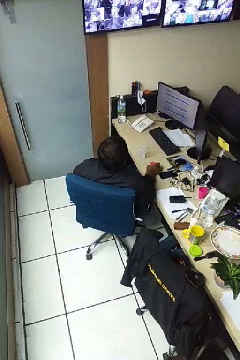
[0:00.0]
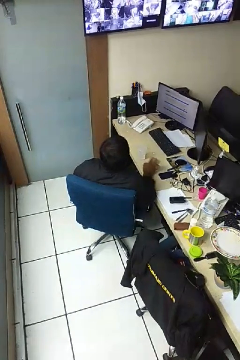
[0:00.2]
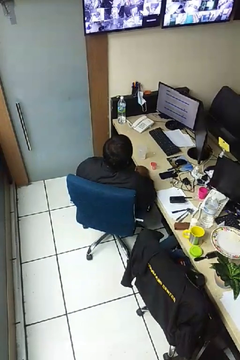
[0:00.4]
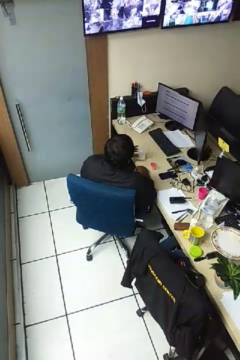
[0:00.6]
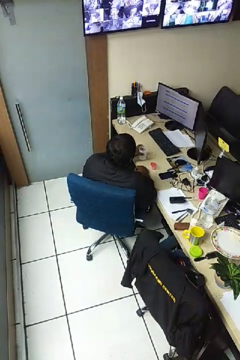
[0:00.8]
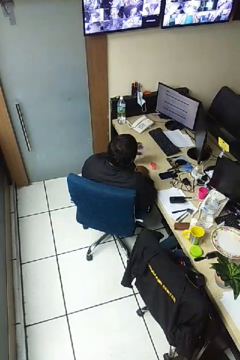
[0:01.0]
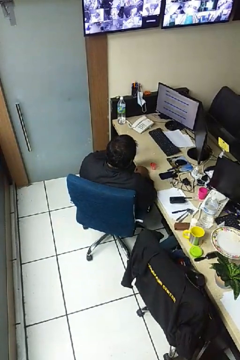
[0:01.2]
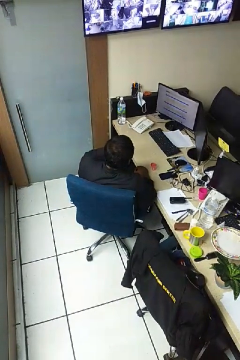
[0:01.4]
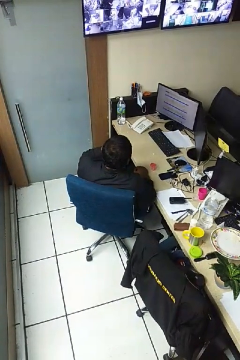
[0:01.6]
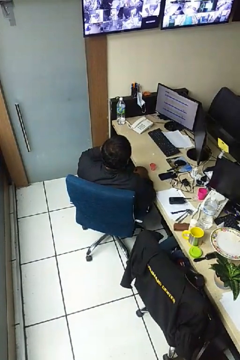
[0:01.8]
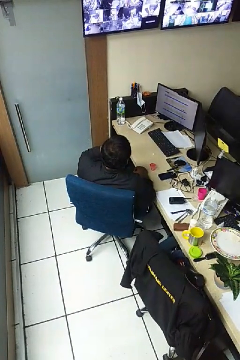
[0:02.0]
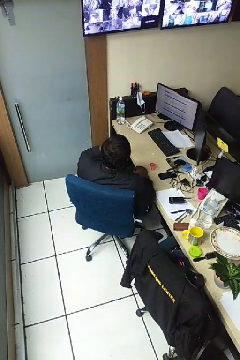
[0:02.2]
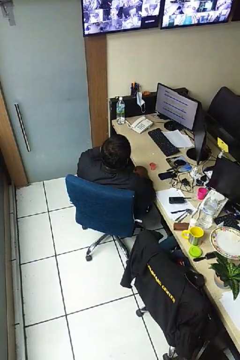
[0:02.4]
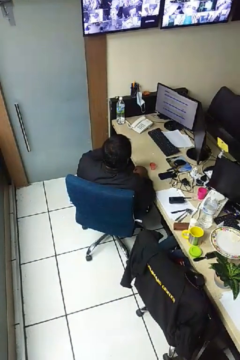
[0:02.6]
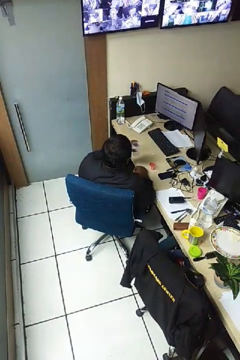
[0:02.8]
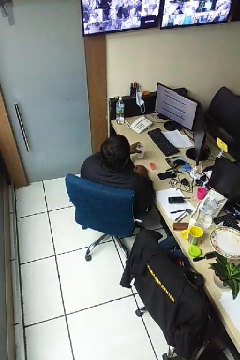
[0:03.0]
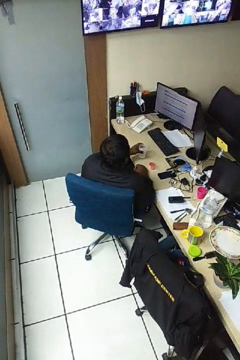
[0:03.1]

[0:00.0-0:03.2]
person drinks from cup

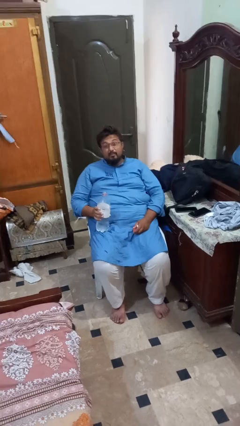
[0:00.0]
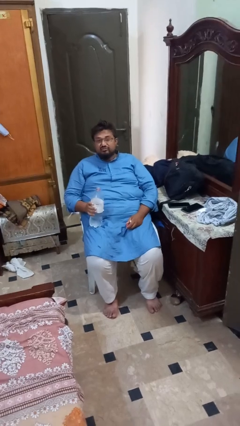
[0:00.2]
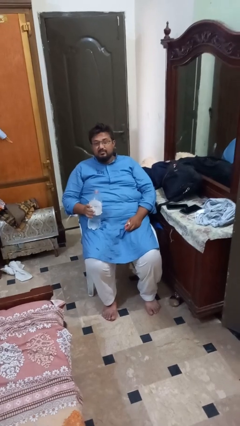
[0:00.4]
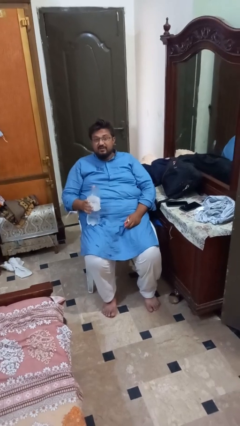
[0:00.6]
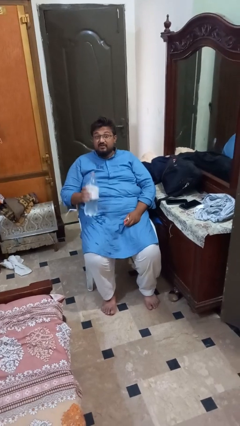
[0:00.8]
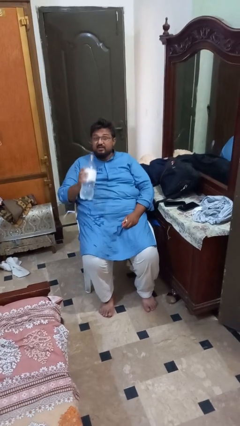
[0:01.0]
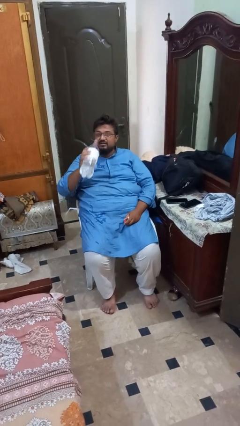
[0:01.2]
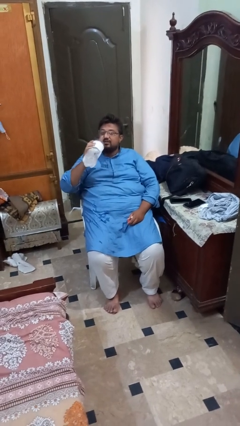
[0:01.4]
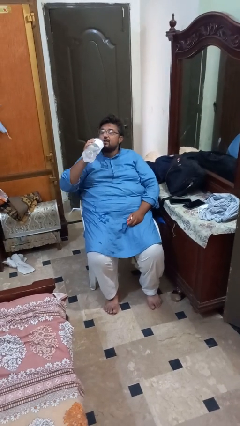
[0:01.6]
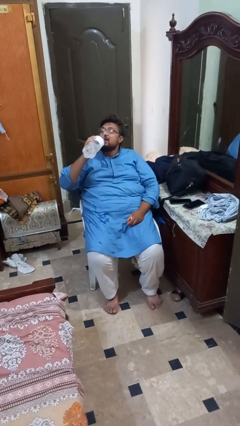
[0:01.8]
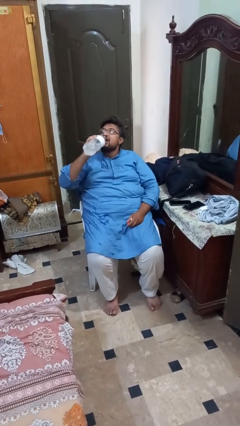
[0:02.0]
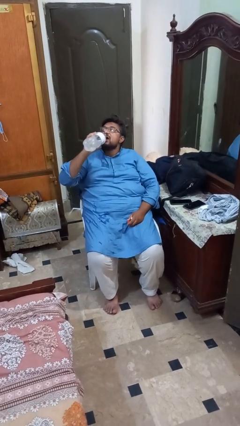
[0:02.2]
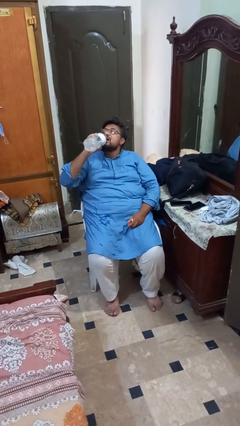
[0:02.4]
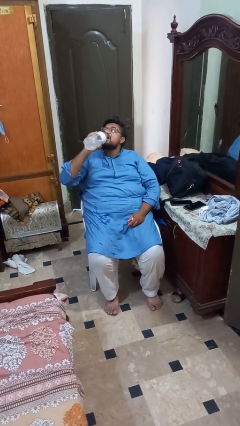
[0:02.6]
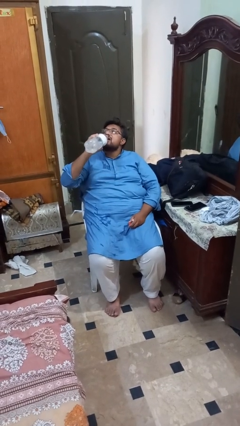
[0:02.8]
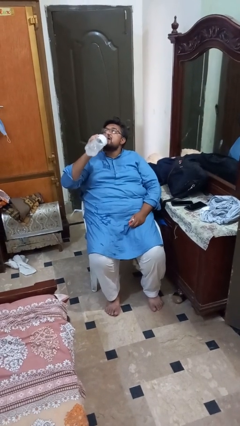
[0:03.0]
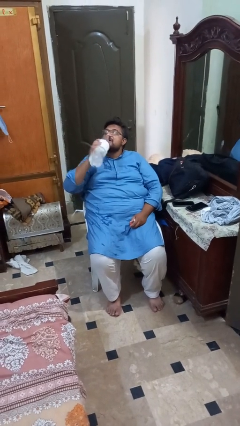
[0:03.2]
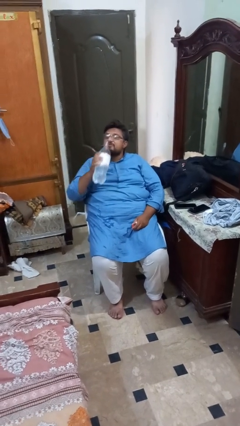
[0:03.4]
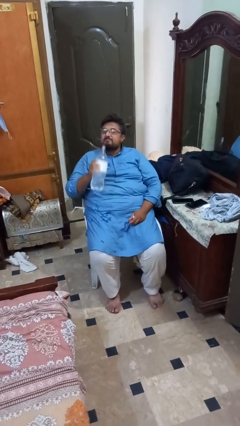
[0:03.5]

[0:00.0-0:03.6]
person drinks from bottle

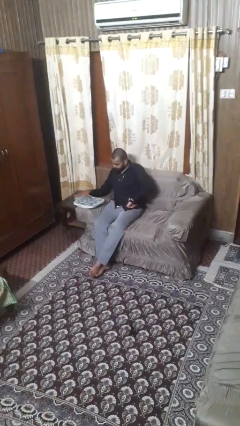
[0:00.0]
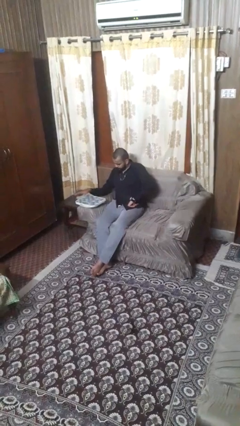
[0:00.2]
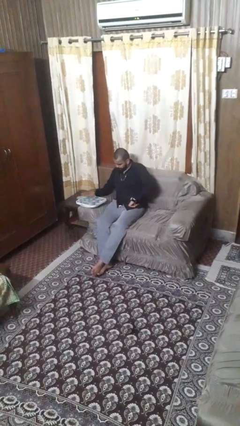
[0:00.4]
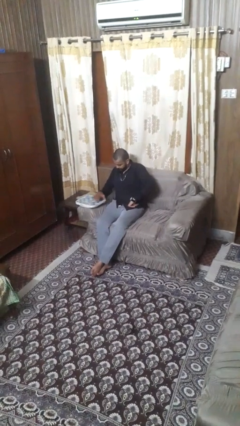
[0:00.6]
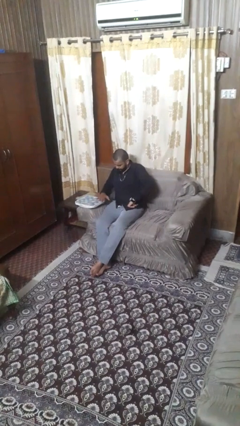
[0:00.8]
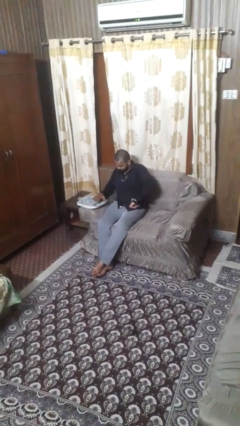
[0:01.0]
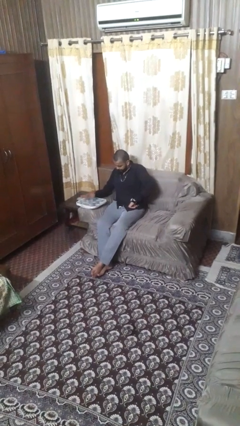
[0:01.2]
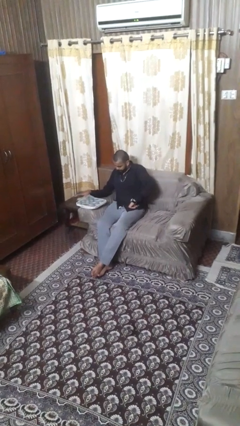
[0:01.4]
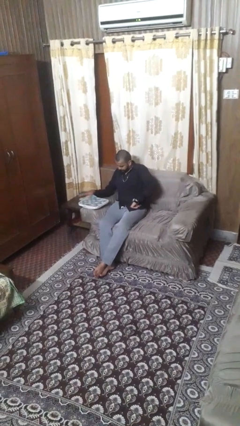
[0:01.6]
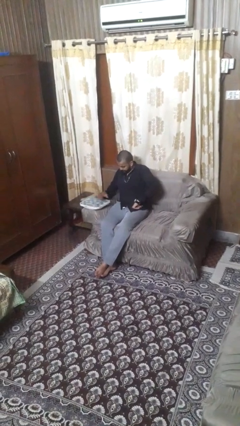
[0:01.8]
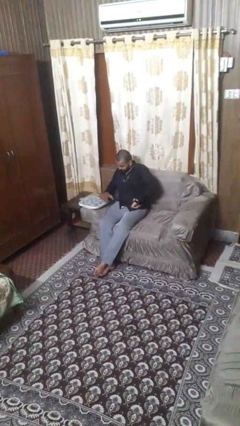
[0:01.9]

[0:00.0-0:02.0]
person waves hand over object

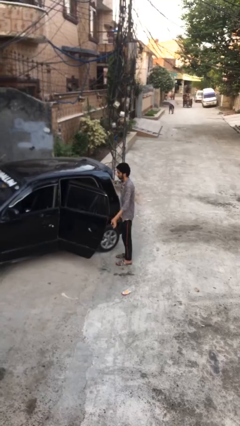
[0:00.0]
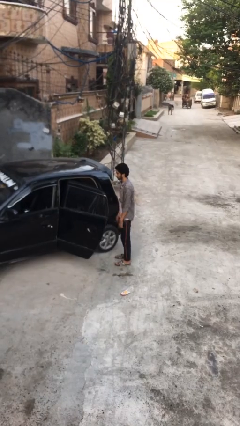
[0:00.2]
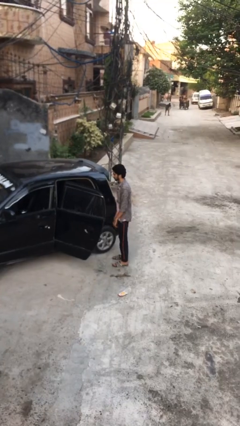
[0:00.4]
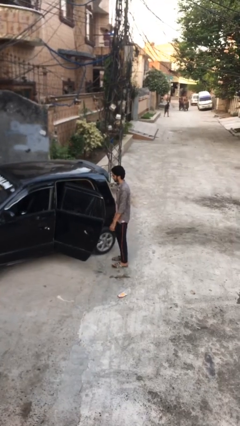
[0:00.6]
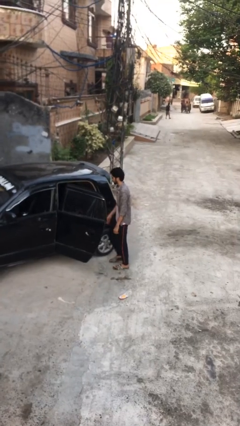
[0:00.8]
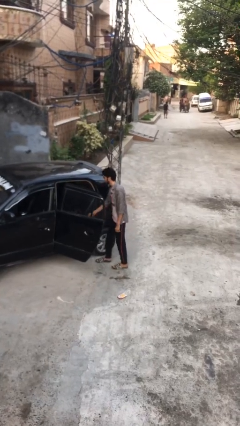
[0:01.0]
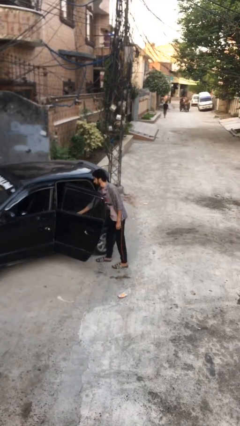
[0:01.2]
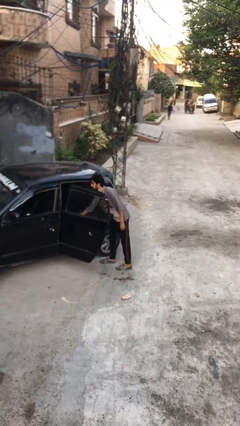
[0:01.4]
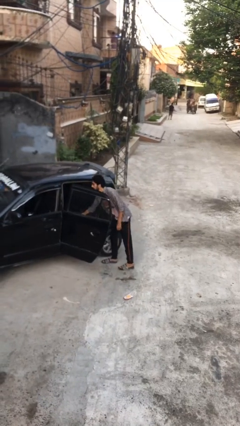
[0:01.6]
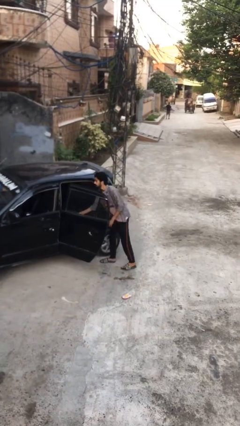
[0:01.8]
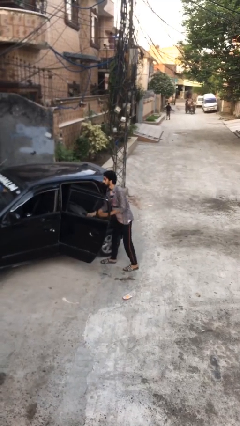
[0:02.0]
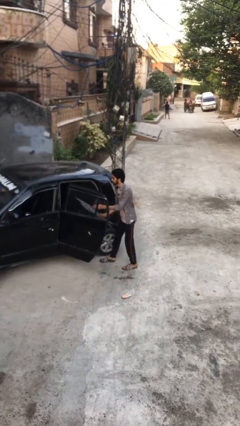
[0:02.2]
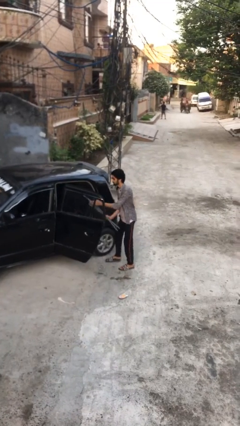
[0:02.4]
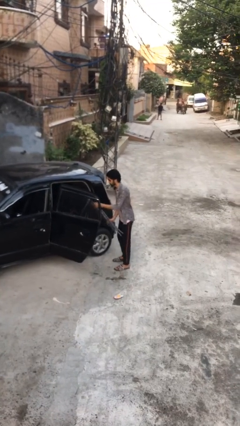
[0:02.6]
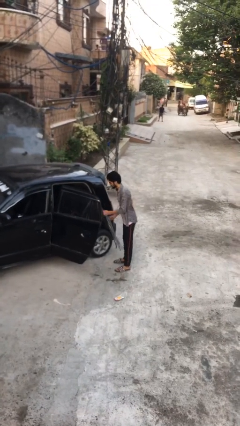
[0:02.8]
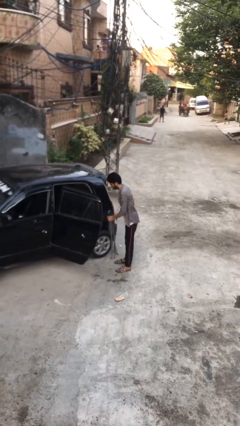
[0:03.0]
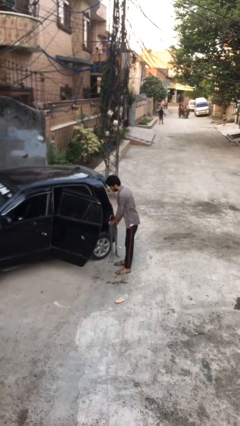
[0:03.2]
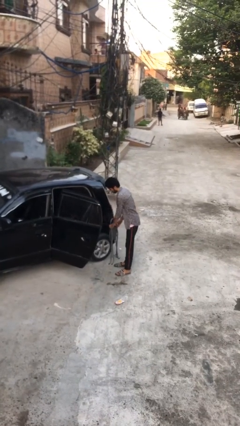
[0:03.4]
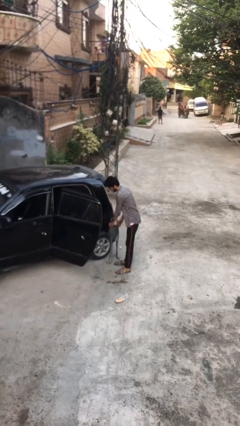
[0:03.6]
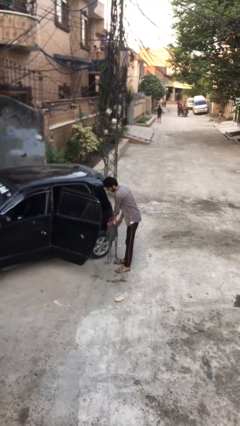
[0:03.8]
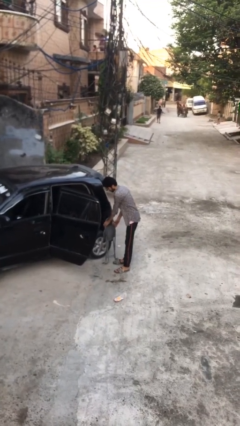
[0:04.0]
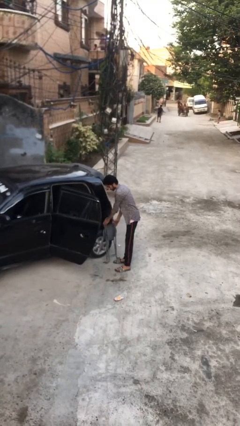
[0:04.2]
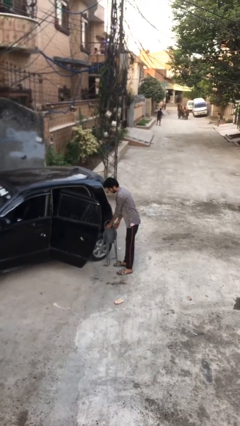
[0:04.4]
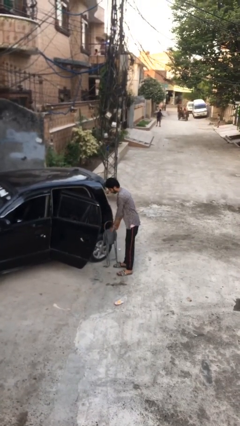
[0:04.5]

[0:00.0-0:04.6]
person unloads car

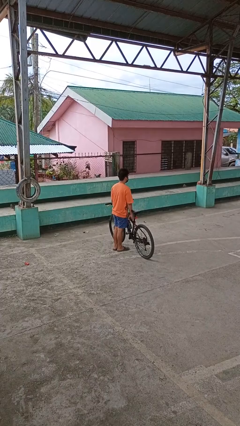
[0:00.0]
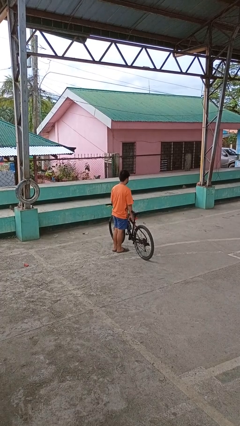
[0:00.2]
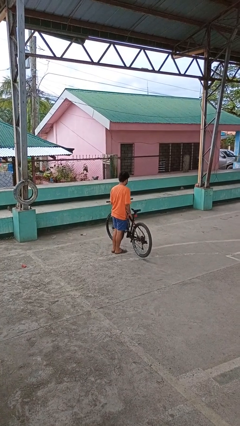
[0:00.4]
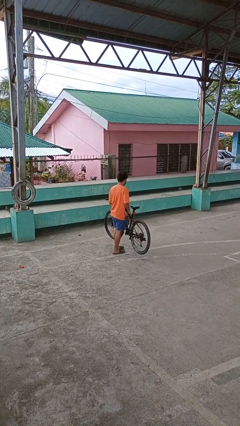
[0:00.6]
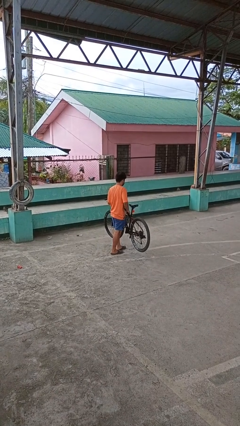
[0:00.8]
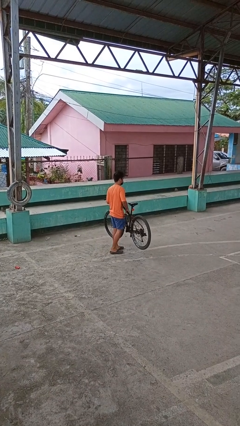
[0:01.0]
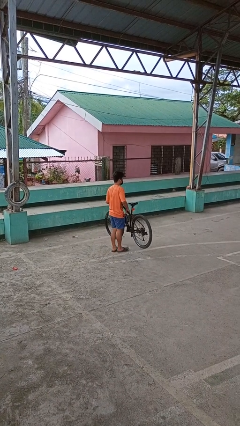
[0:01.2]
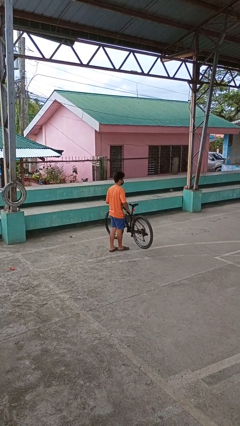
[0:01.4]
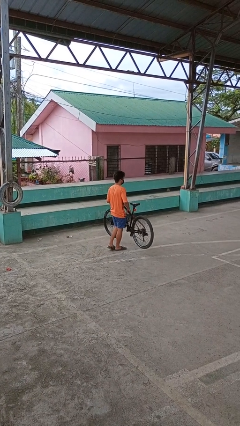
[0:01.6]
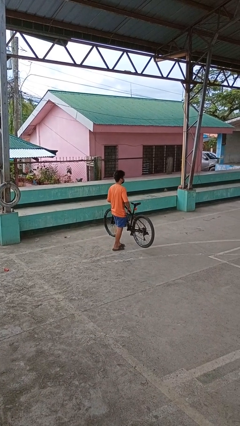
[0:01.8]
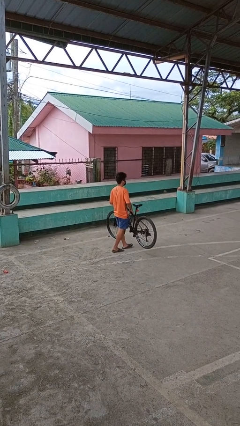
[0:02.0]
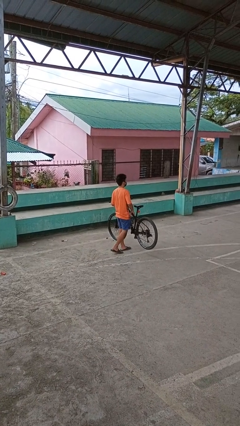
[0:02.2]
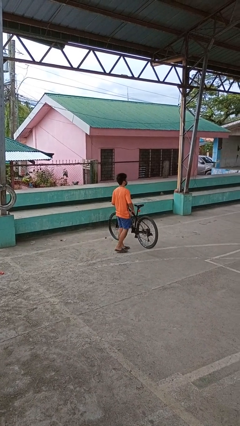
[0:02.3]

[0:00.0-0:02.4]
person carries bicycle

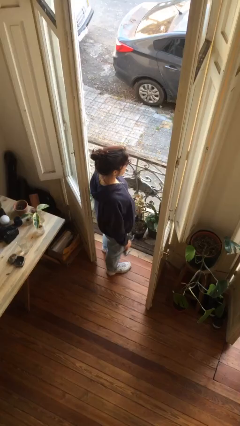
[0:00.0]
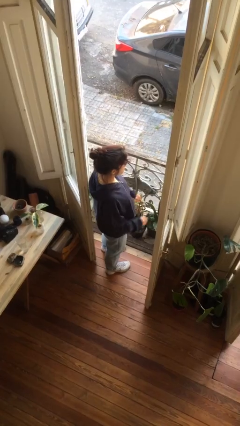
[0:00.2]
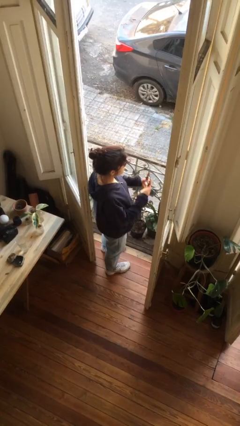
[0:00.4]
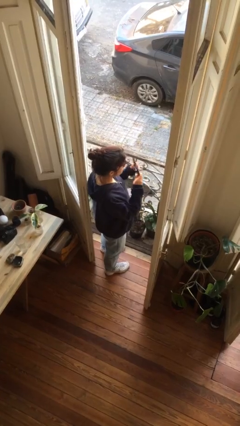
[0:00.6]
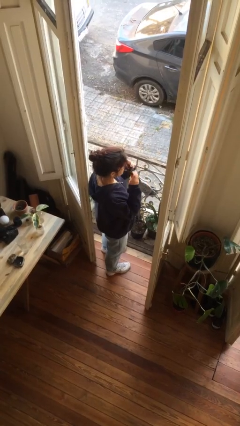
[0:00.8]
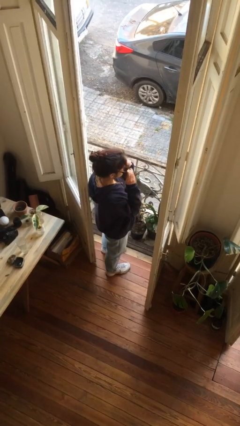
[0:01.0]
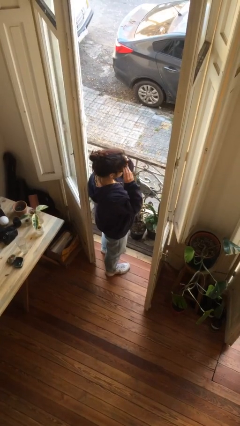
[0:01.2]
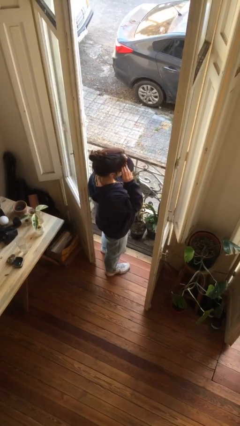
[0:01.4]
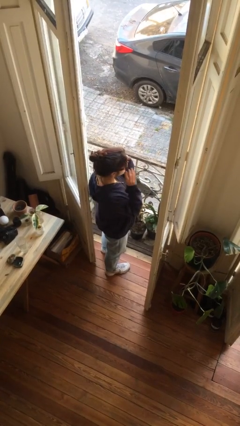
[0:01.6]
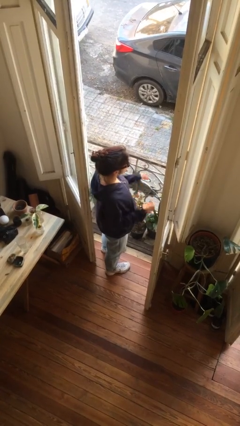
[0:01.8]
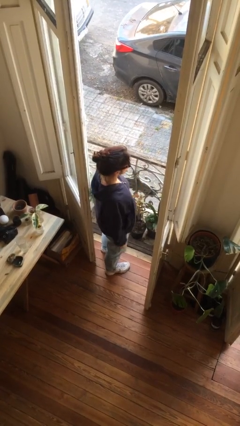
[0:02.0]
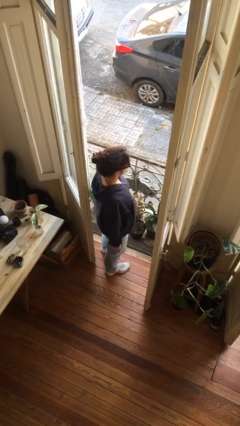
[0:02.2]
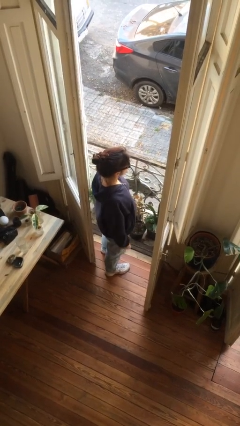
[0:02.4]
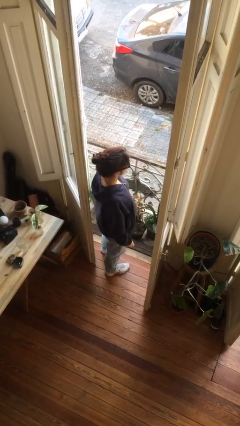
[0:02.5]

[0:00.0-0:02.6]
person puts on sunglasses
